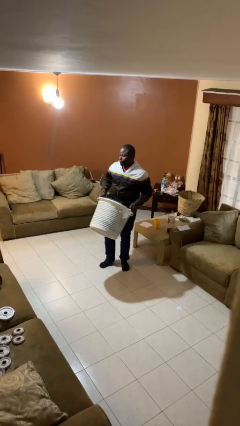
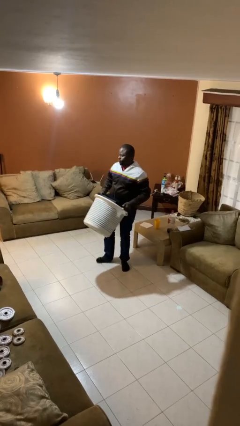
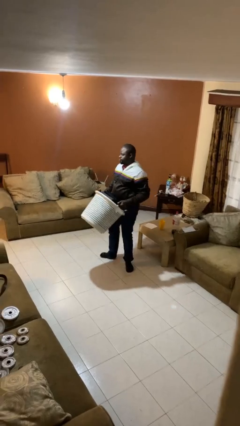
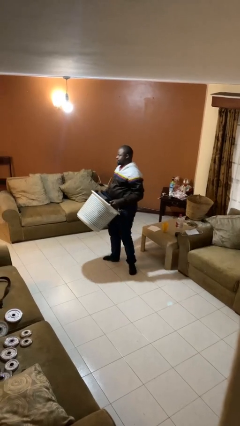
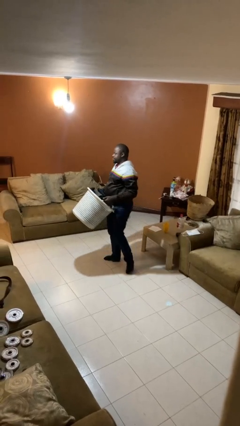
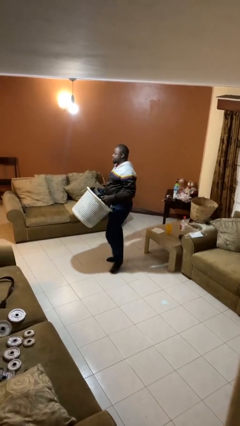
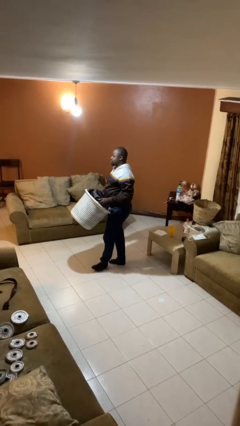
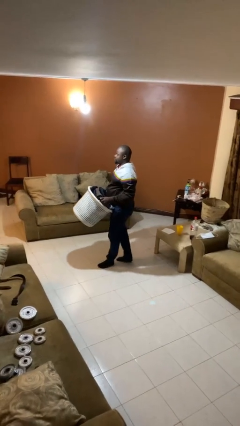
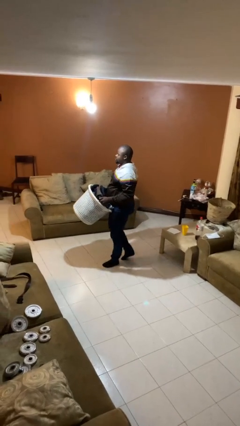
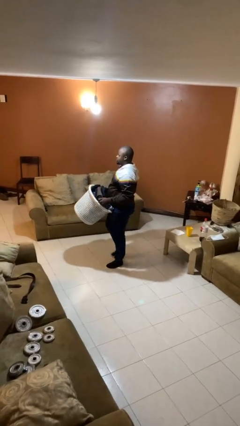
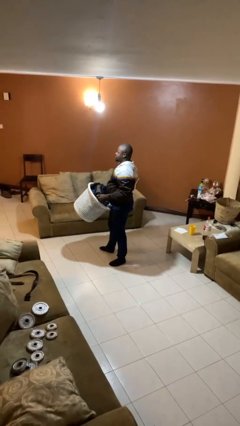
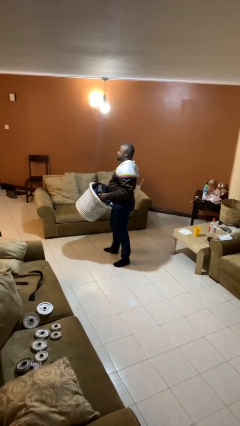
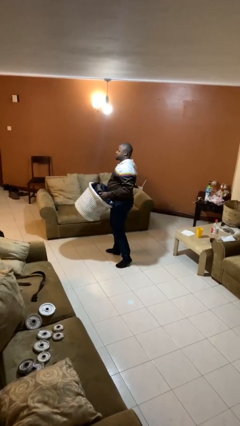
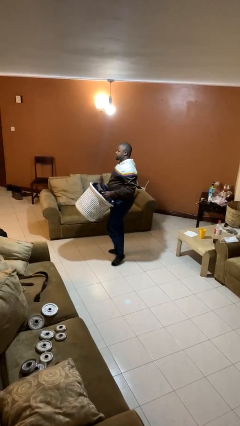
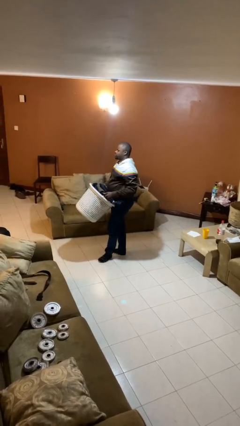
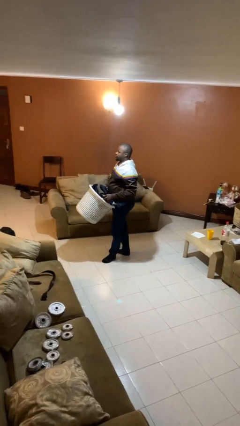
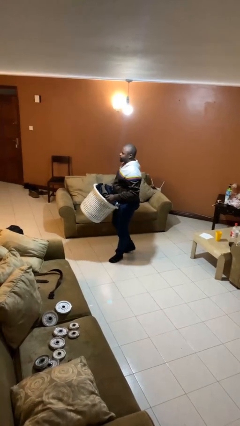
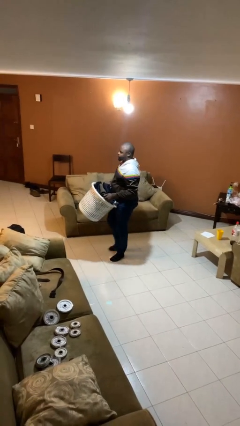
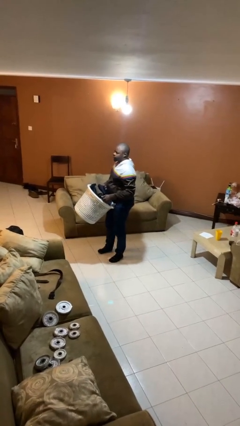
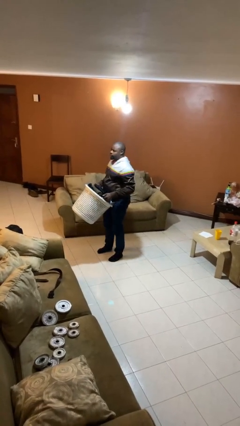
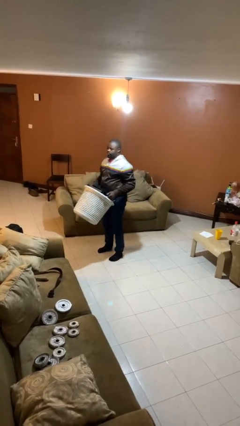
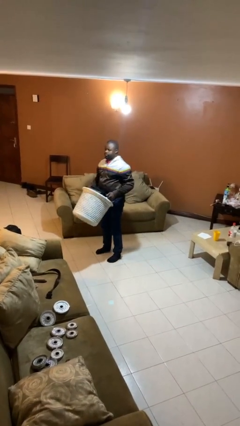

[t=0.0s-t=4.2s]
person carries laundry basket

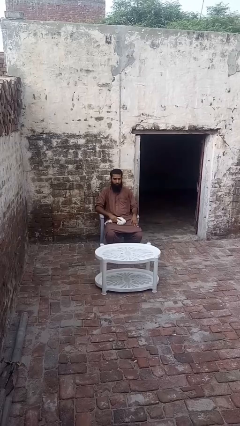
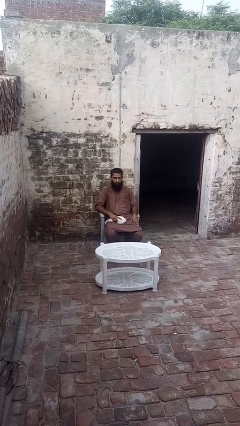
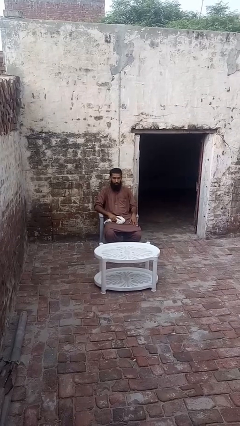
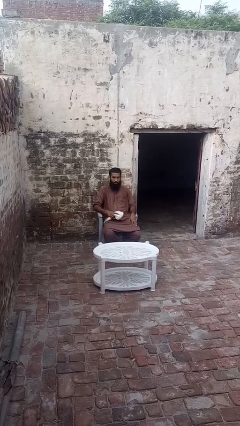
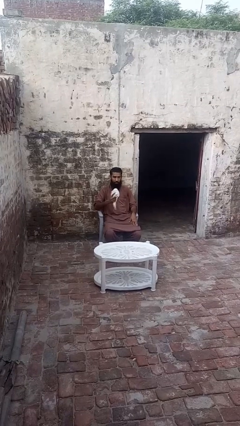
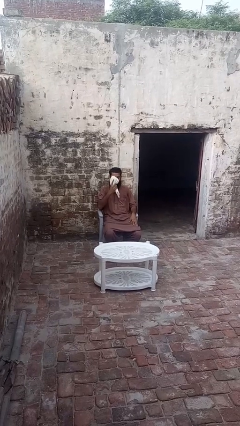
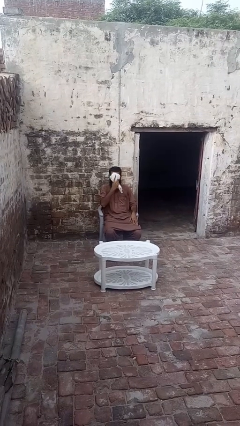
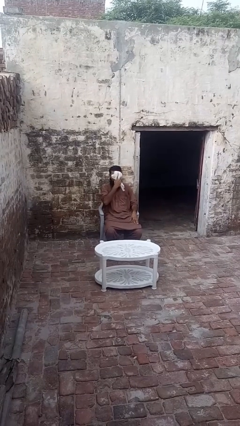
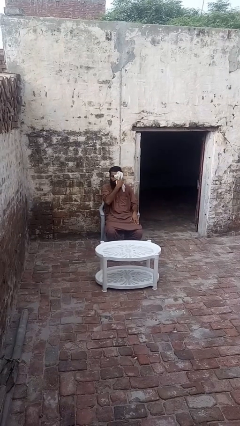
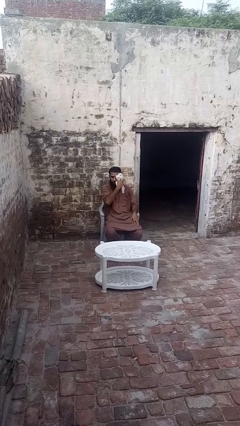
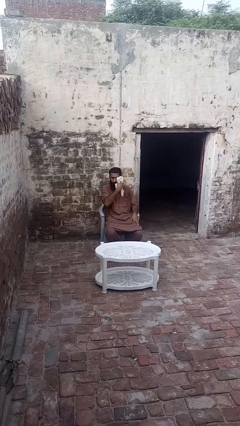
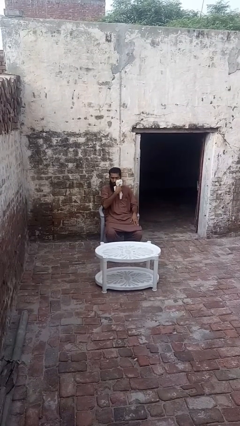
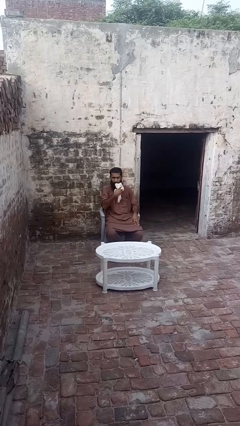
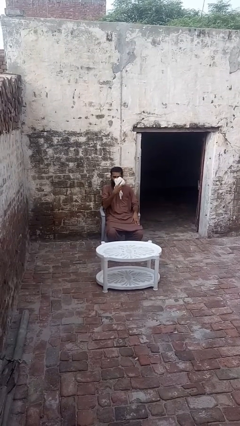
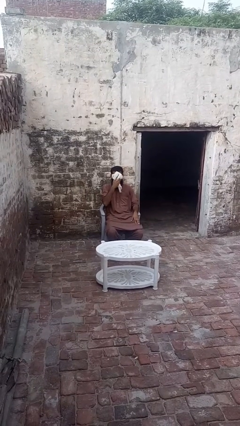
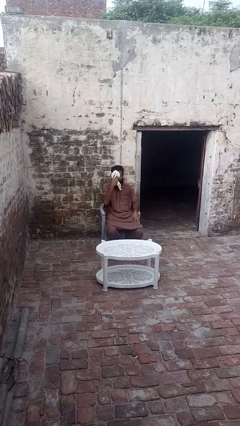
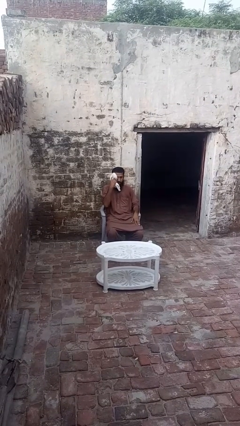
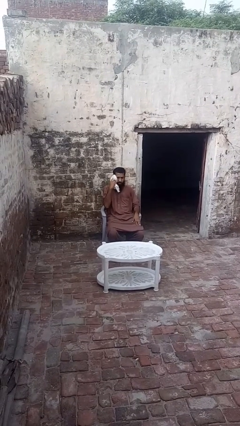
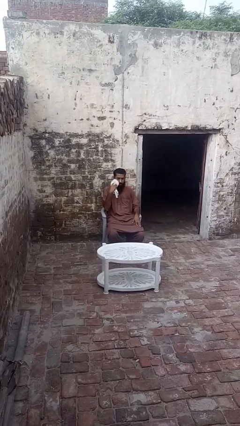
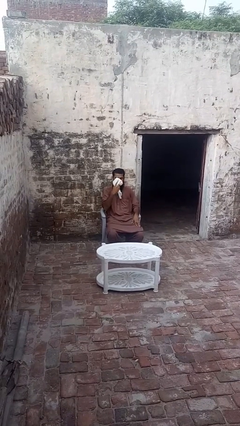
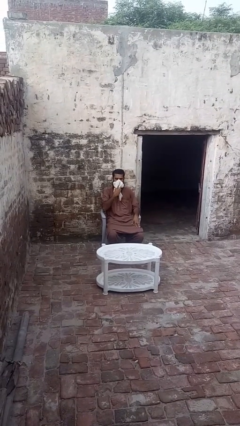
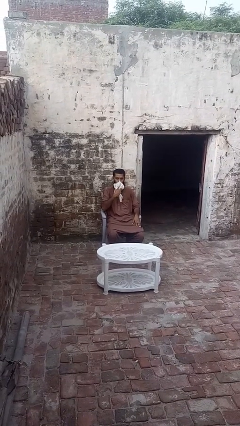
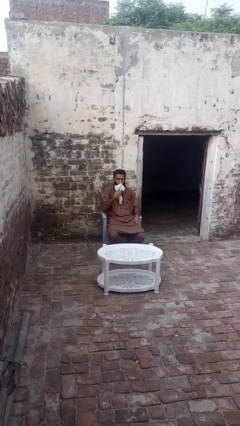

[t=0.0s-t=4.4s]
person wipes mouth with napkin

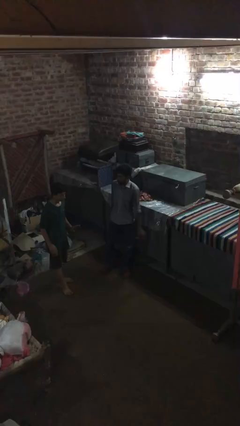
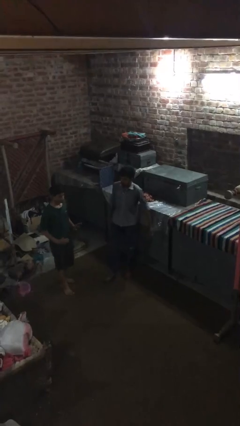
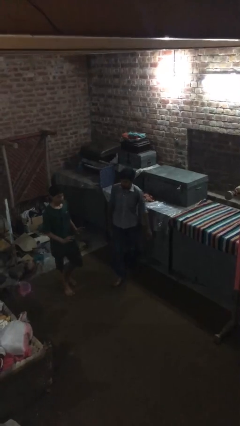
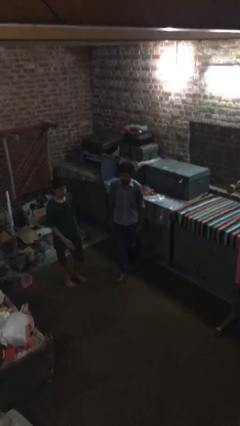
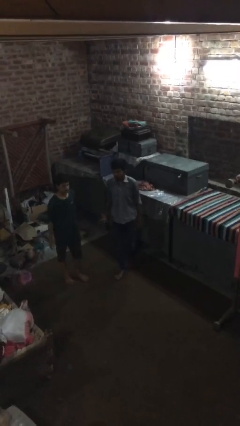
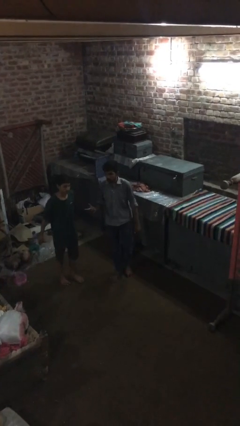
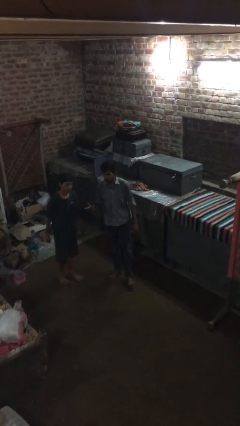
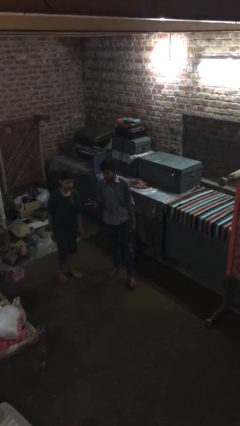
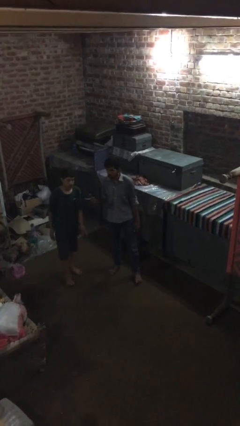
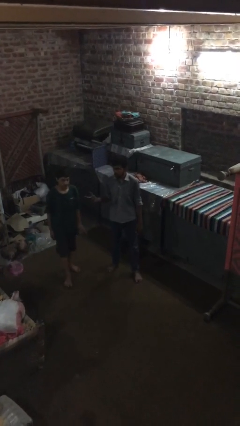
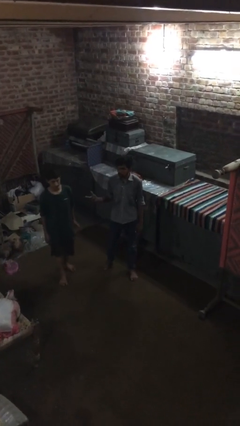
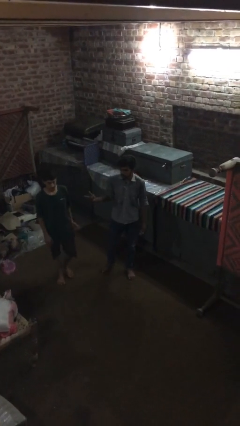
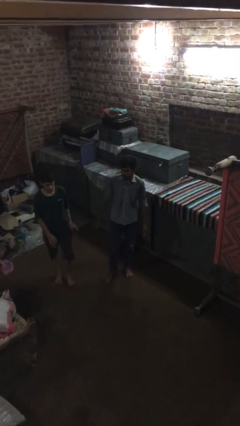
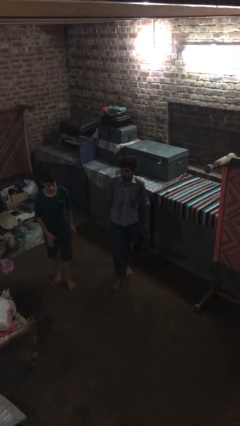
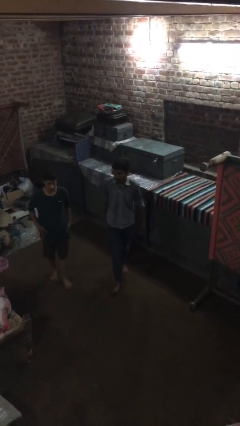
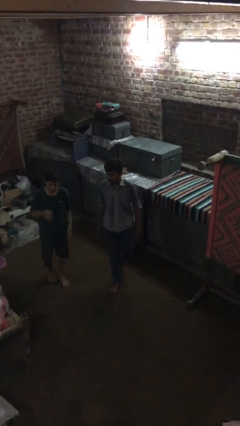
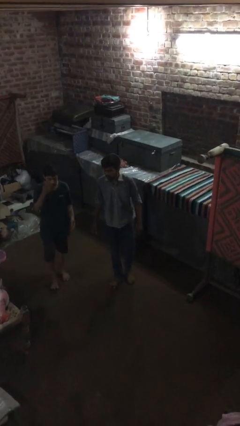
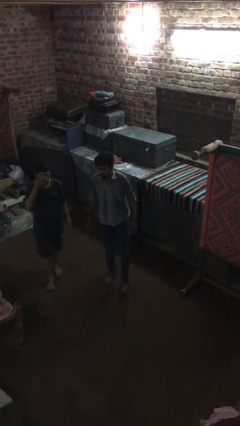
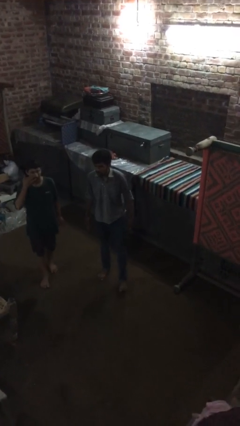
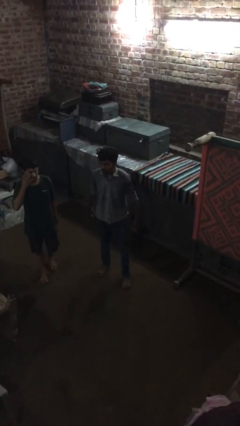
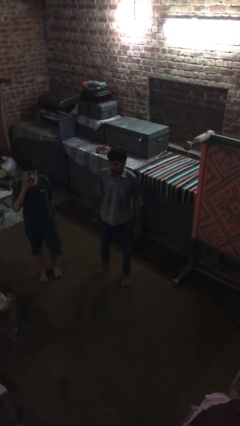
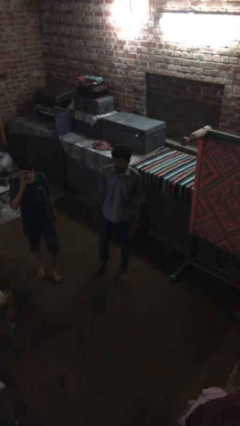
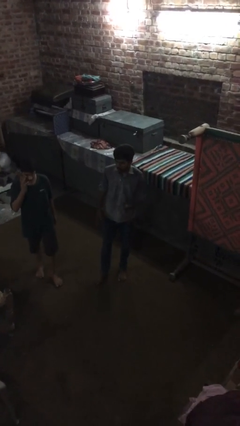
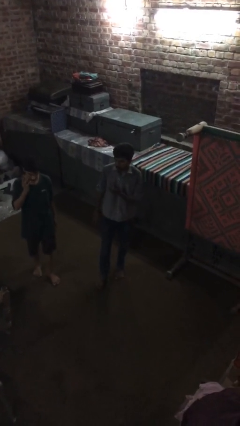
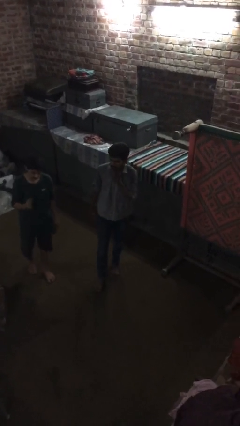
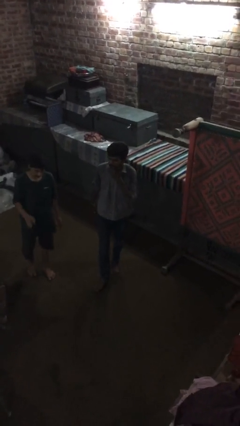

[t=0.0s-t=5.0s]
person talks to person

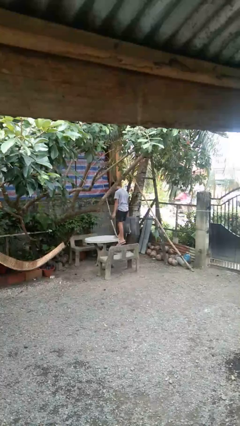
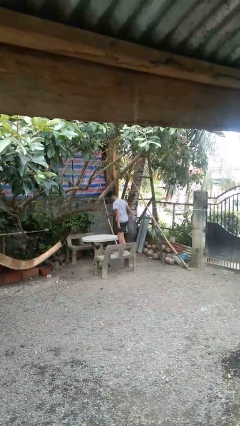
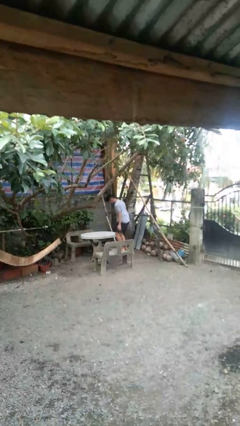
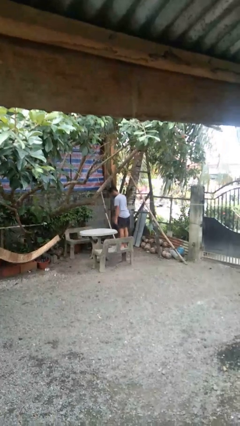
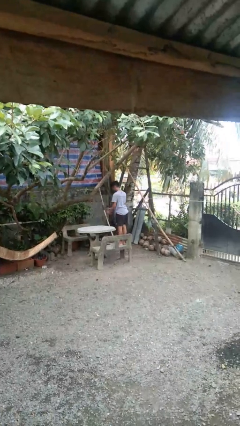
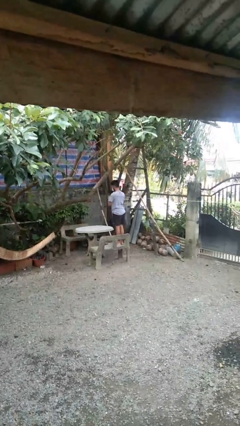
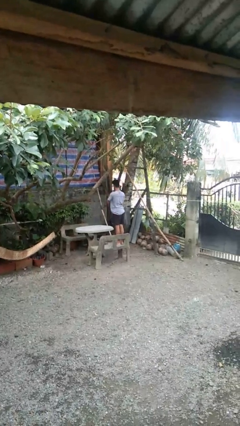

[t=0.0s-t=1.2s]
person climbs off table

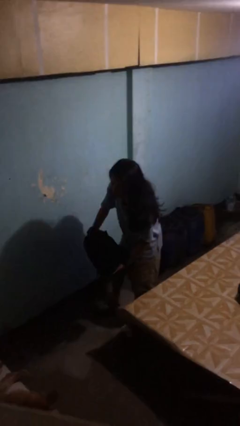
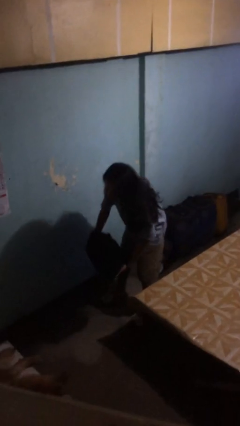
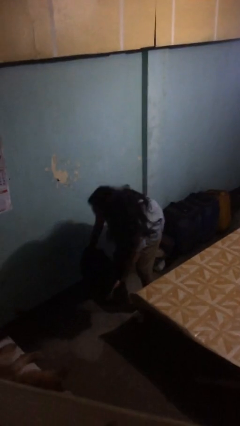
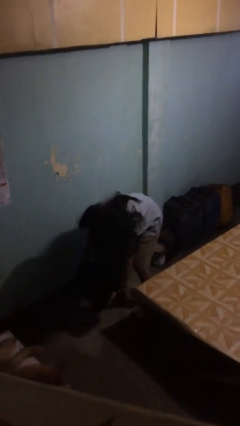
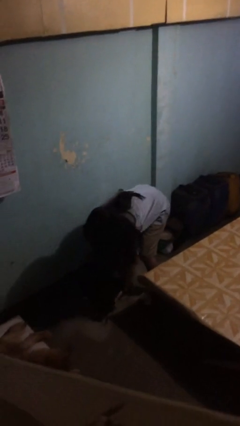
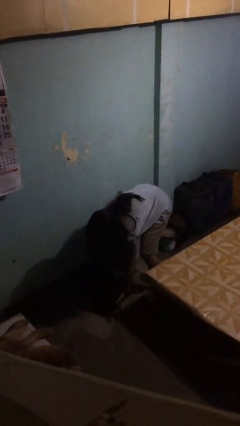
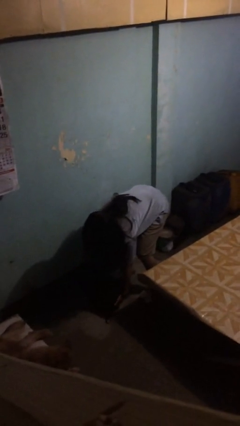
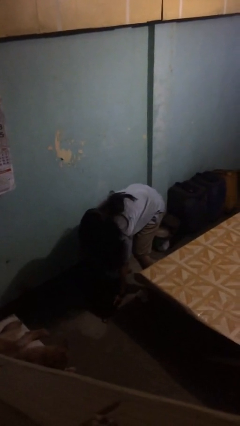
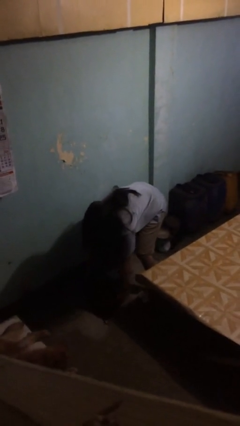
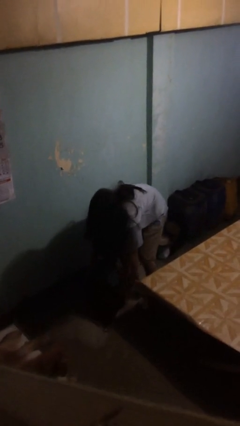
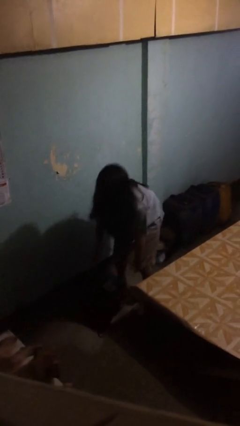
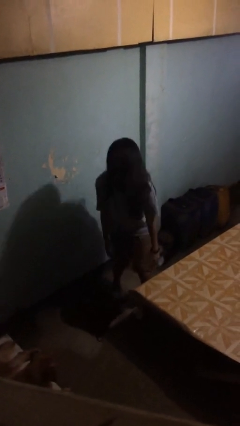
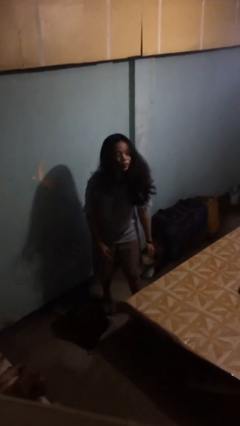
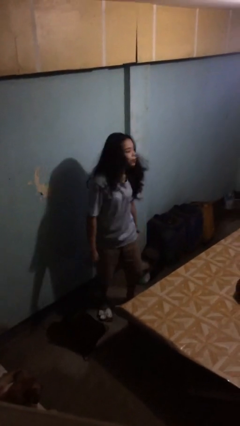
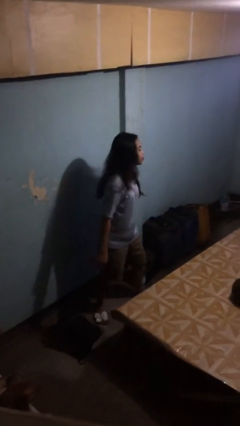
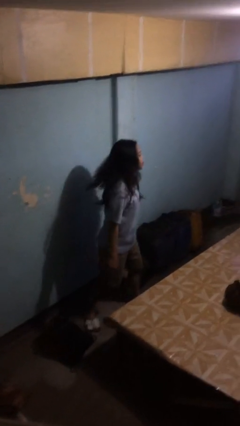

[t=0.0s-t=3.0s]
person puts down object on floor
